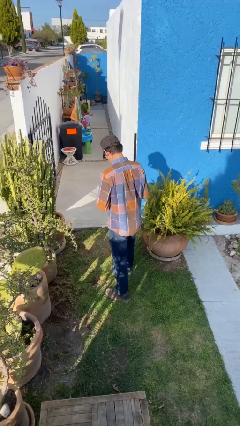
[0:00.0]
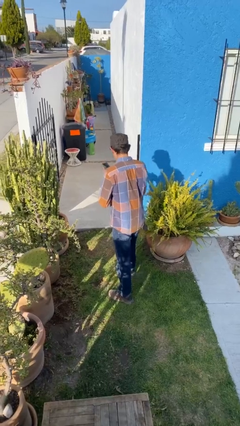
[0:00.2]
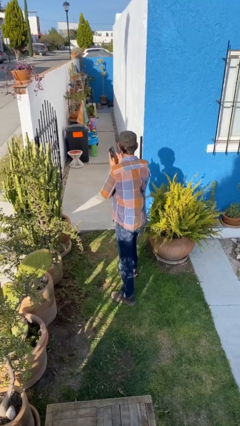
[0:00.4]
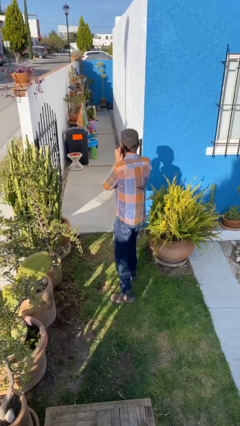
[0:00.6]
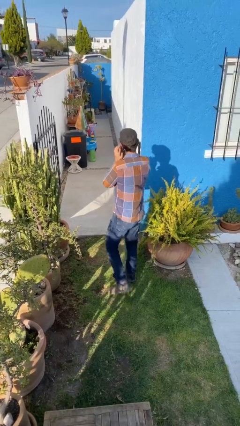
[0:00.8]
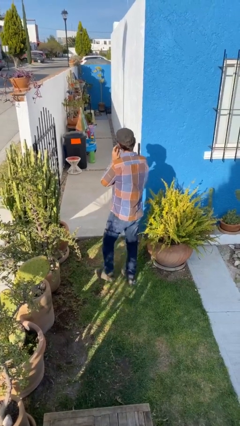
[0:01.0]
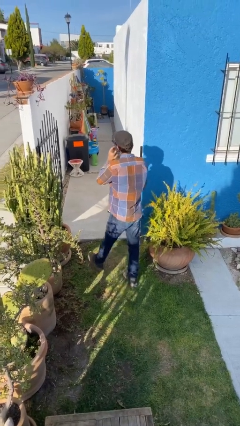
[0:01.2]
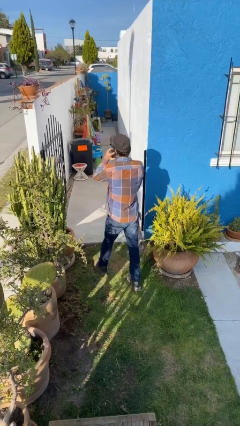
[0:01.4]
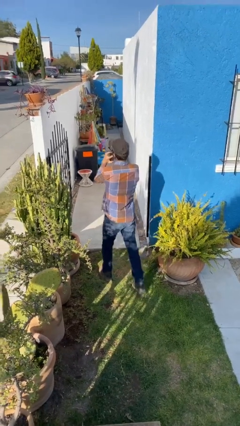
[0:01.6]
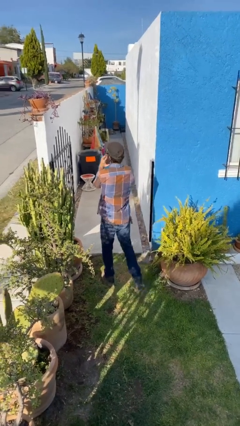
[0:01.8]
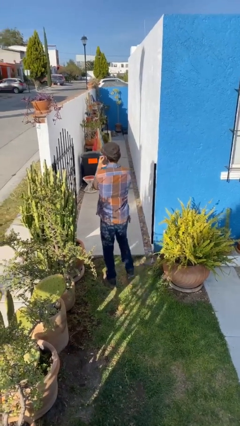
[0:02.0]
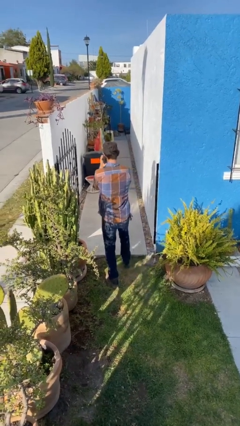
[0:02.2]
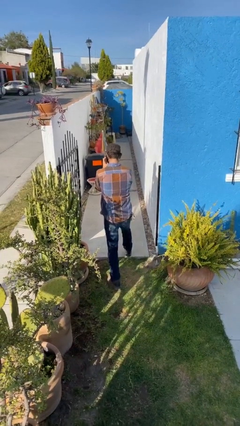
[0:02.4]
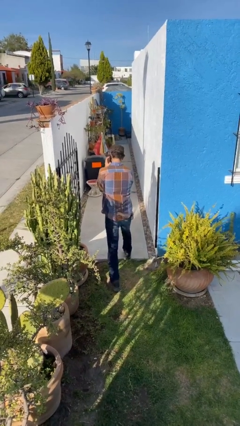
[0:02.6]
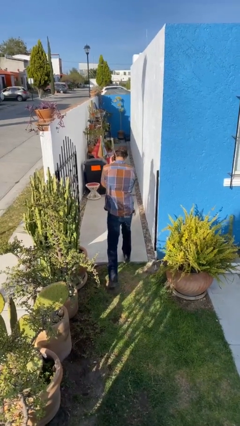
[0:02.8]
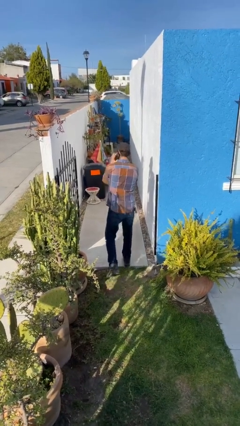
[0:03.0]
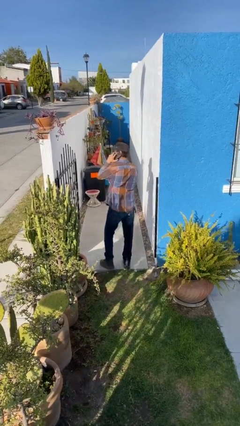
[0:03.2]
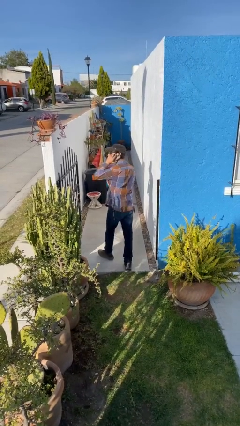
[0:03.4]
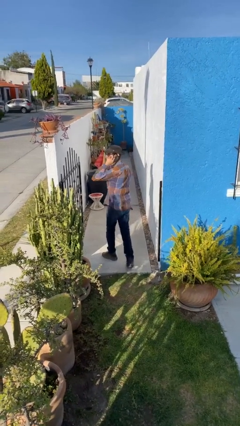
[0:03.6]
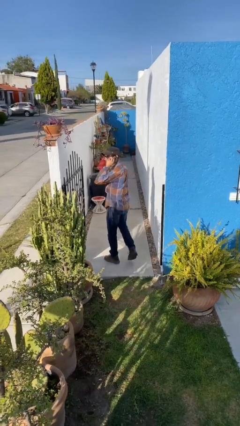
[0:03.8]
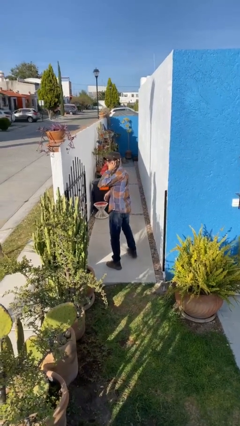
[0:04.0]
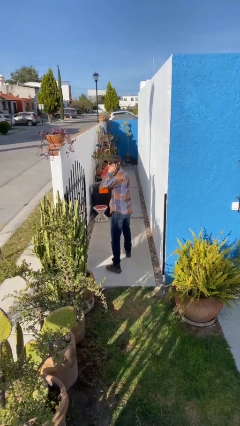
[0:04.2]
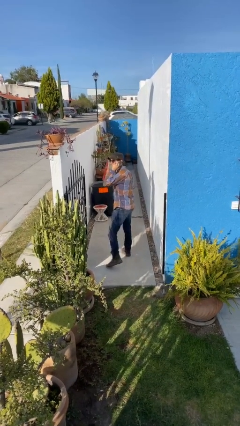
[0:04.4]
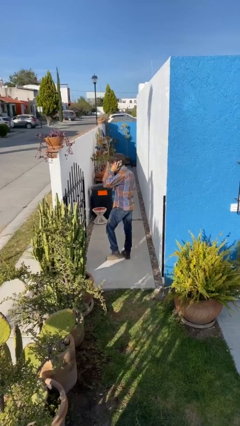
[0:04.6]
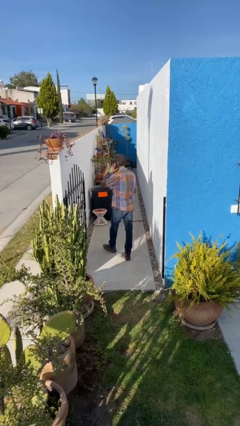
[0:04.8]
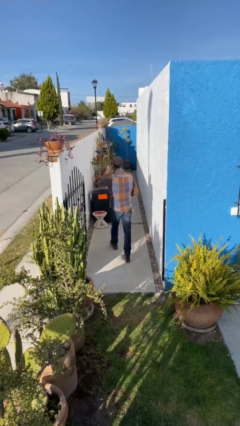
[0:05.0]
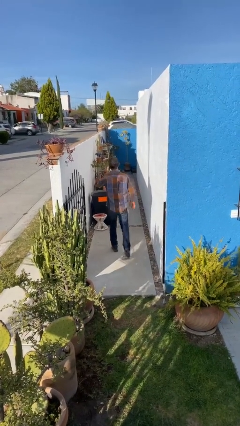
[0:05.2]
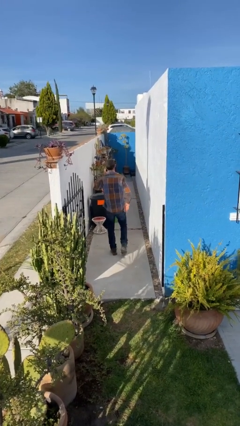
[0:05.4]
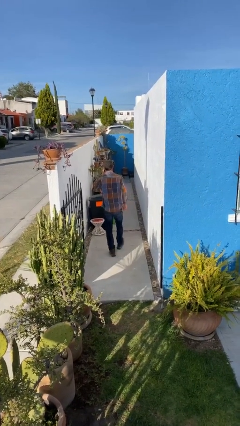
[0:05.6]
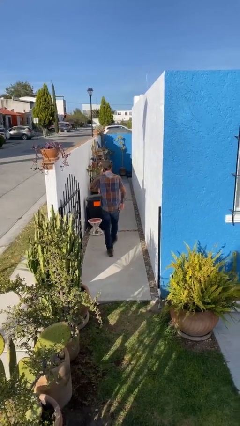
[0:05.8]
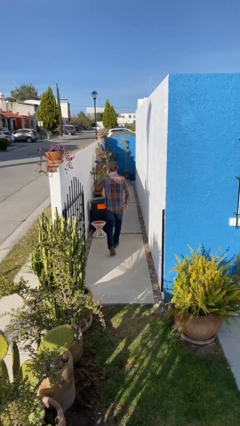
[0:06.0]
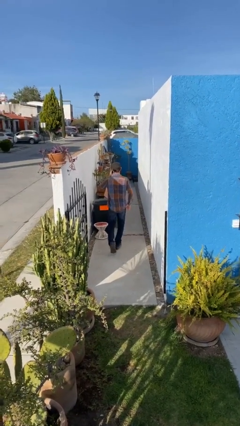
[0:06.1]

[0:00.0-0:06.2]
person exits scene through structure

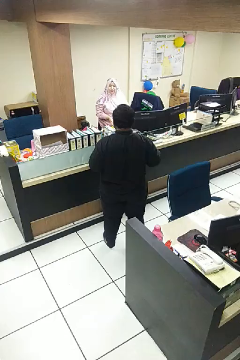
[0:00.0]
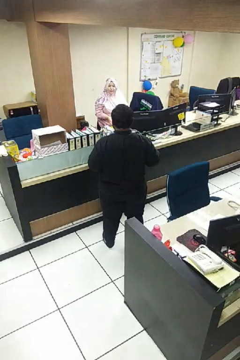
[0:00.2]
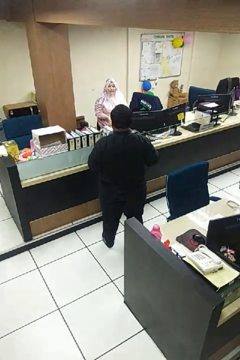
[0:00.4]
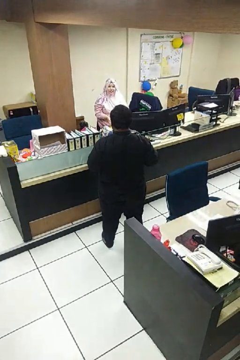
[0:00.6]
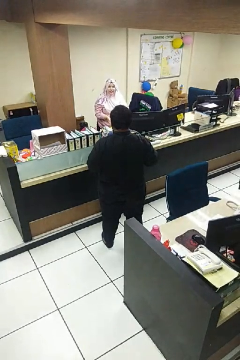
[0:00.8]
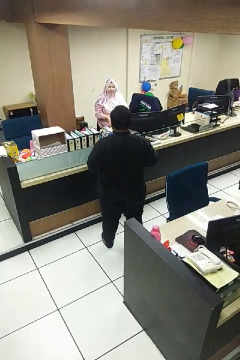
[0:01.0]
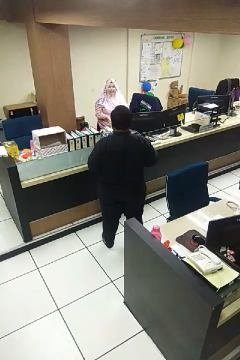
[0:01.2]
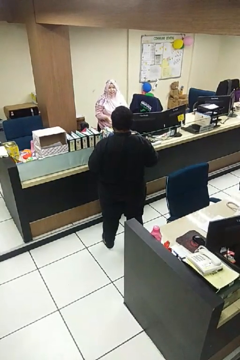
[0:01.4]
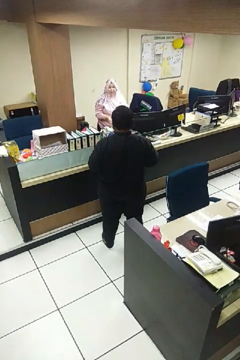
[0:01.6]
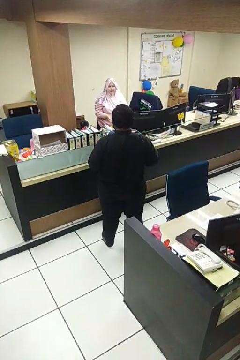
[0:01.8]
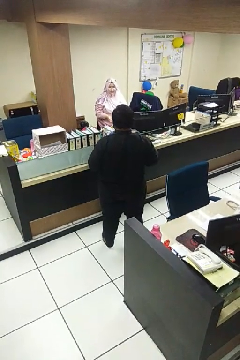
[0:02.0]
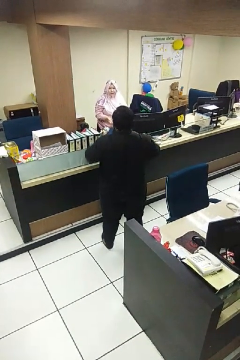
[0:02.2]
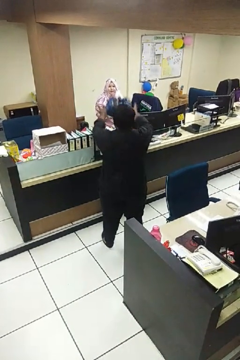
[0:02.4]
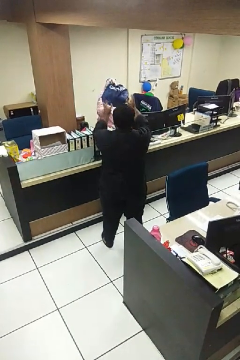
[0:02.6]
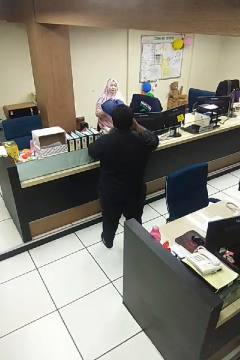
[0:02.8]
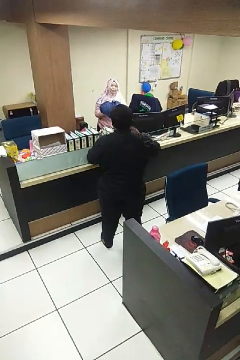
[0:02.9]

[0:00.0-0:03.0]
person throws object to person

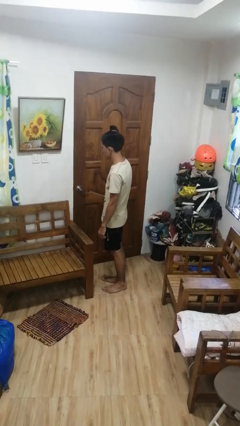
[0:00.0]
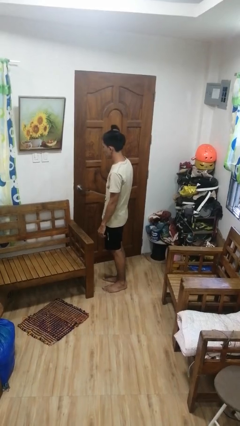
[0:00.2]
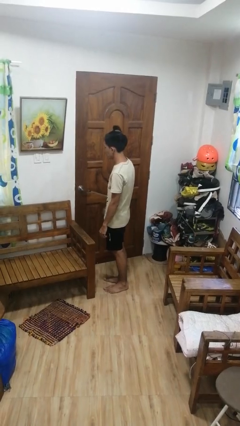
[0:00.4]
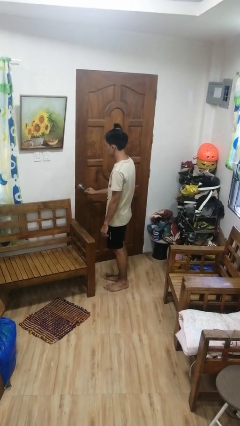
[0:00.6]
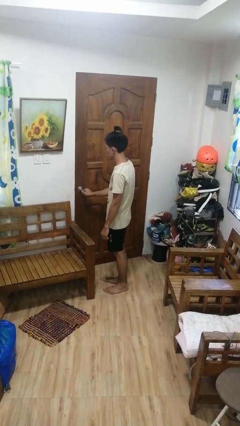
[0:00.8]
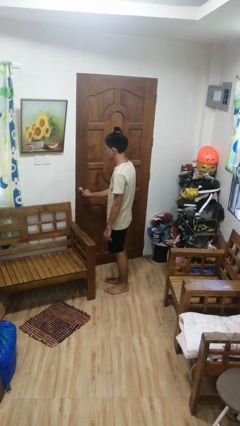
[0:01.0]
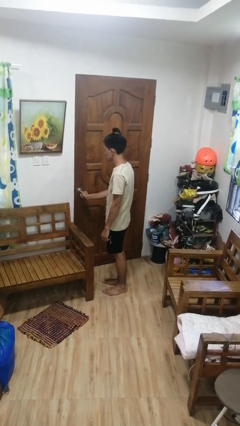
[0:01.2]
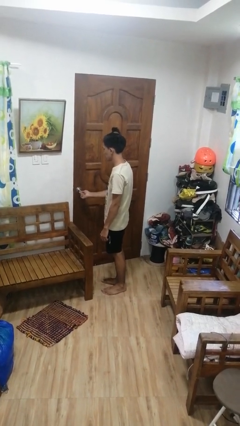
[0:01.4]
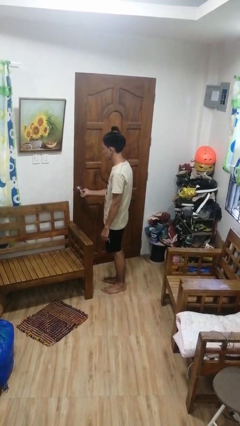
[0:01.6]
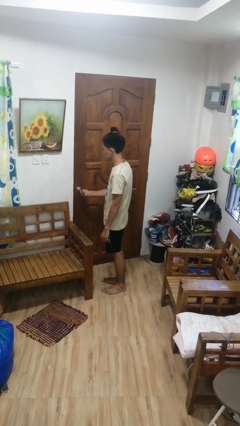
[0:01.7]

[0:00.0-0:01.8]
person locks door with keys

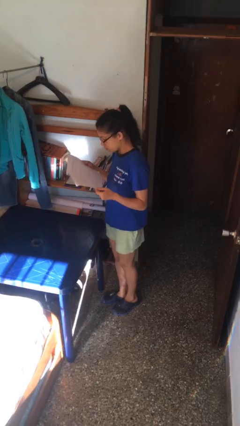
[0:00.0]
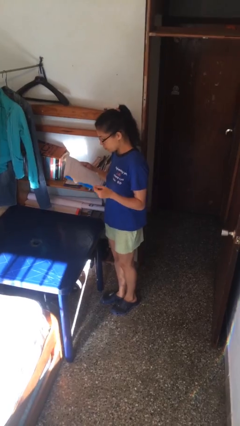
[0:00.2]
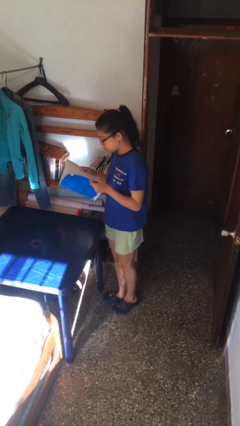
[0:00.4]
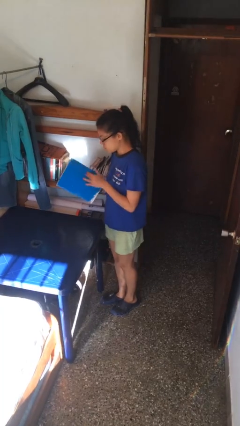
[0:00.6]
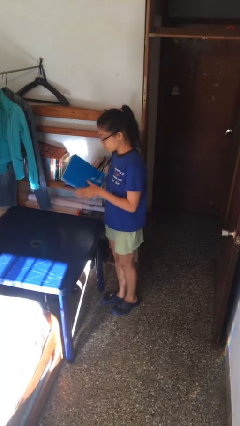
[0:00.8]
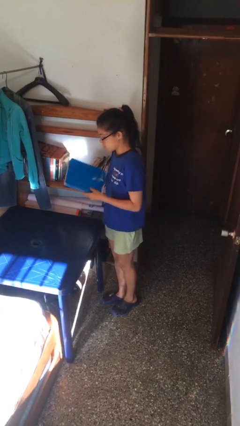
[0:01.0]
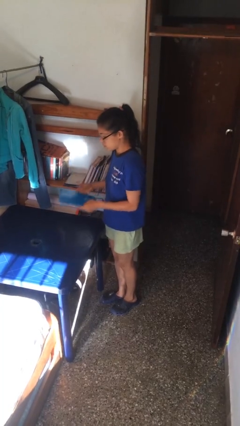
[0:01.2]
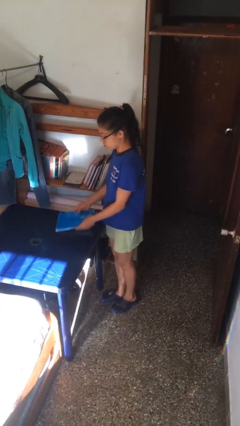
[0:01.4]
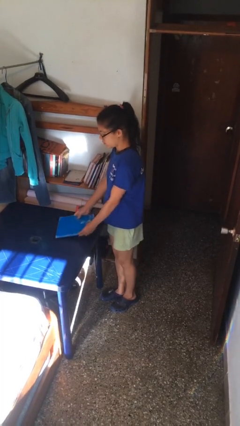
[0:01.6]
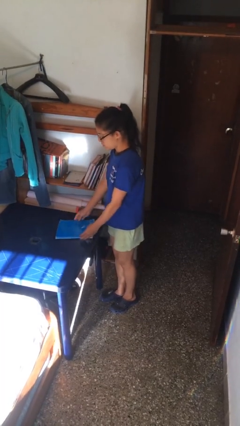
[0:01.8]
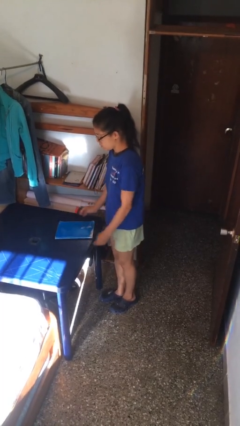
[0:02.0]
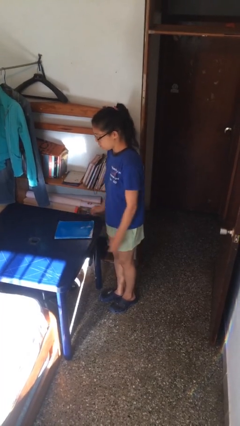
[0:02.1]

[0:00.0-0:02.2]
person puts down object on table

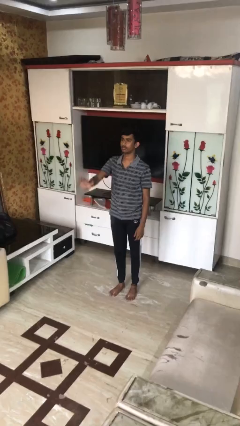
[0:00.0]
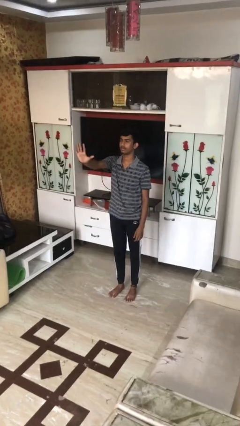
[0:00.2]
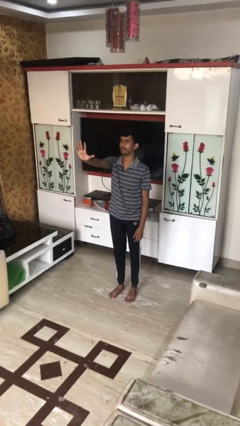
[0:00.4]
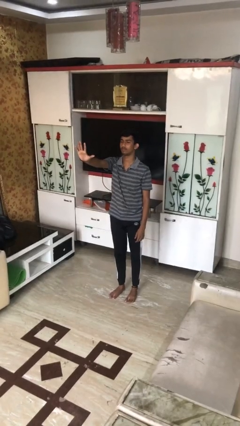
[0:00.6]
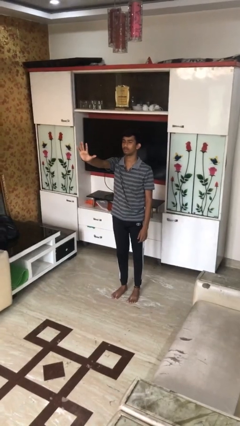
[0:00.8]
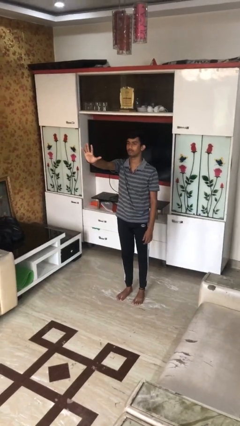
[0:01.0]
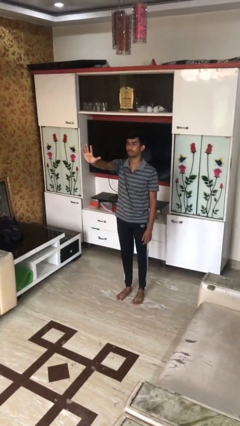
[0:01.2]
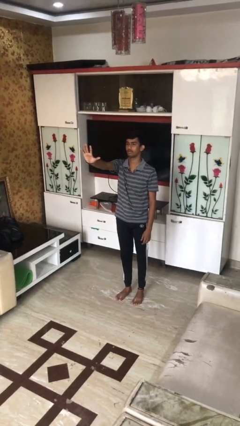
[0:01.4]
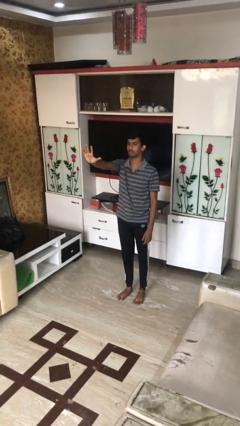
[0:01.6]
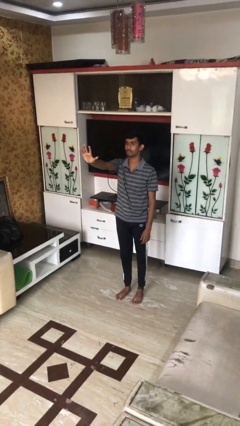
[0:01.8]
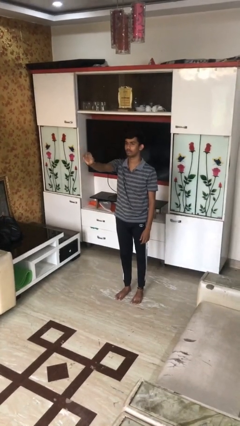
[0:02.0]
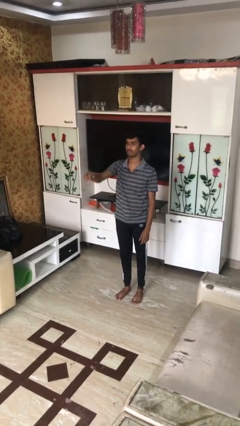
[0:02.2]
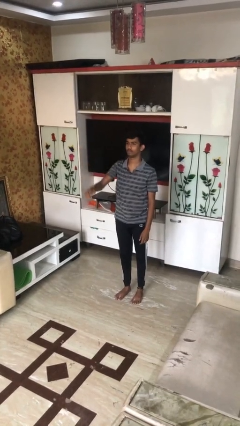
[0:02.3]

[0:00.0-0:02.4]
person gestures number five

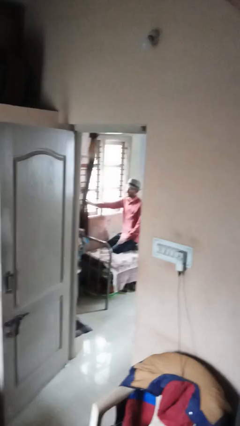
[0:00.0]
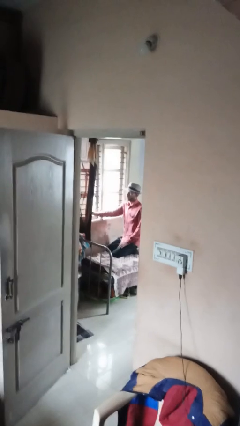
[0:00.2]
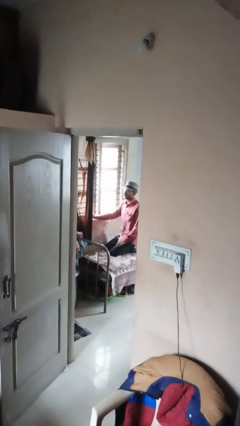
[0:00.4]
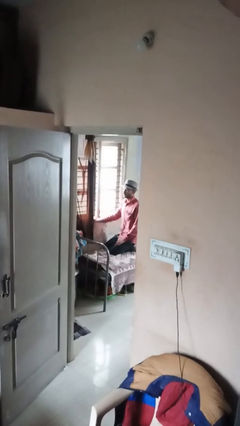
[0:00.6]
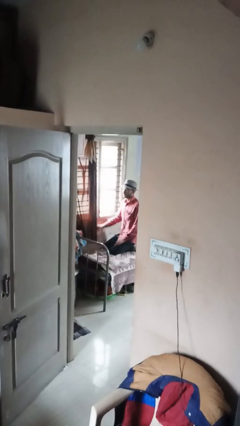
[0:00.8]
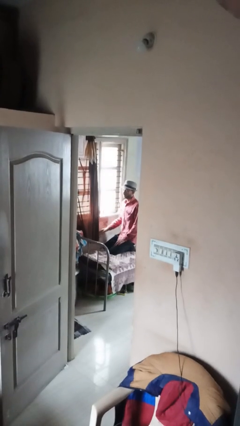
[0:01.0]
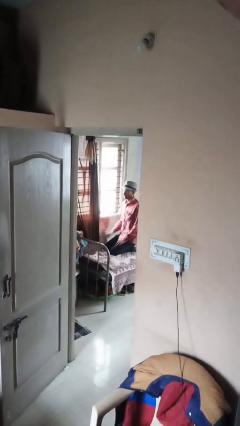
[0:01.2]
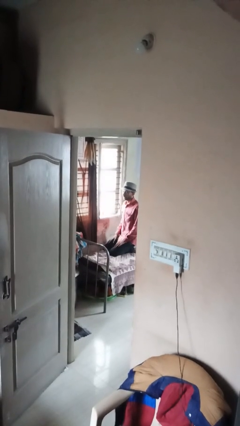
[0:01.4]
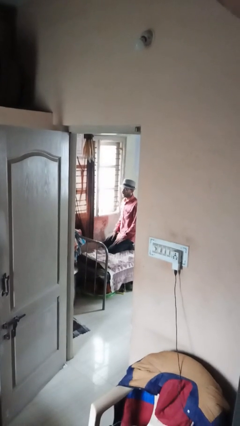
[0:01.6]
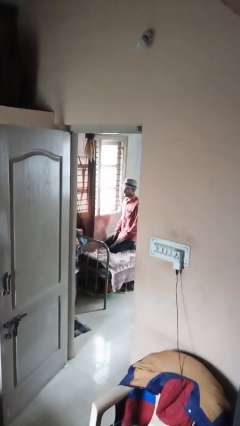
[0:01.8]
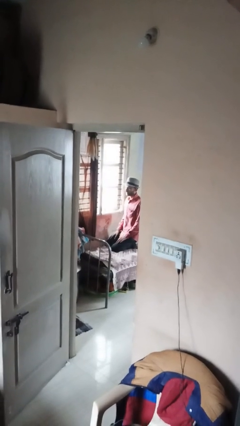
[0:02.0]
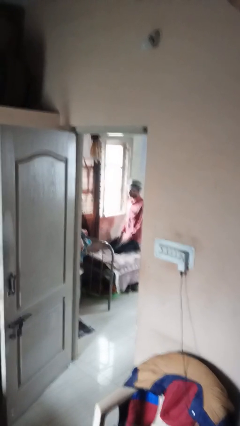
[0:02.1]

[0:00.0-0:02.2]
person opens curtains
